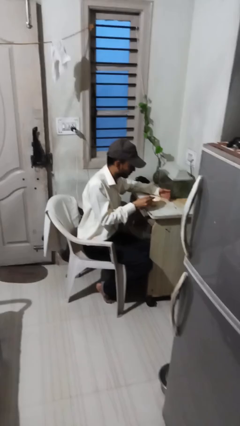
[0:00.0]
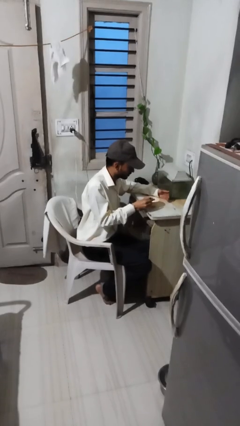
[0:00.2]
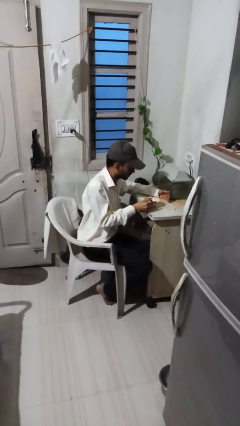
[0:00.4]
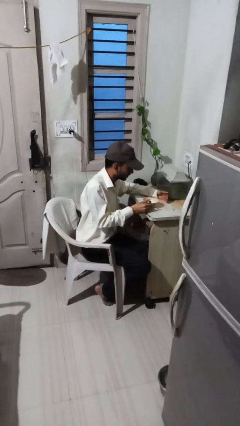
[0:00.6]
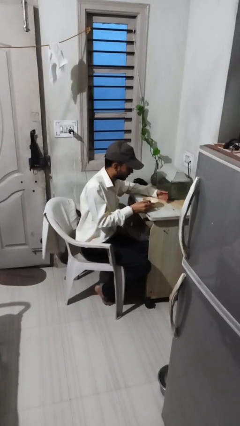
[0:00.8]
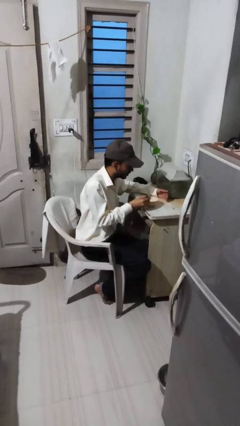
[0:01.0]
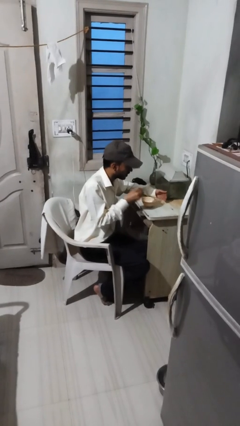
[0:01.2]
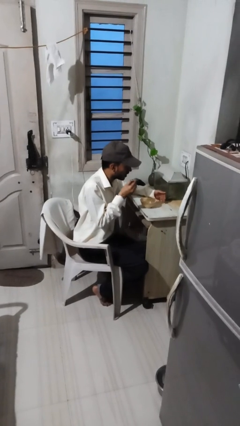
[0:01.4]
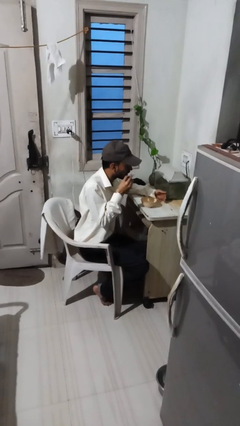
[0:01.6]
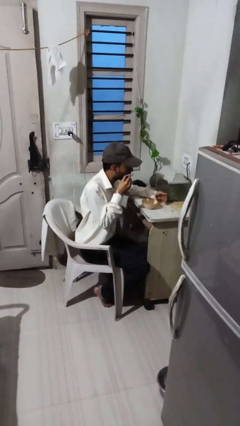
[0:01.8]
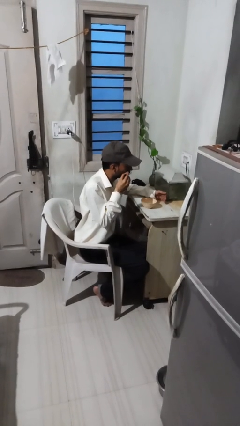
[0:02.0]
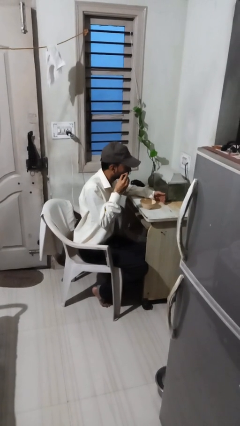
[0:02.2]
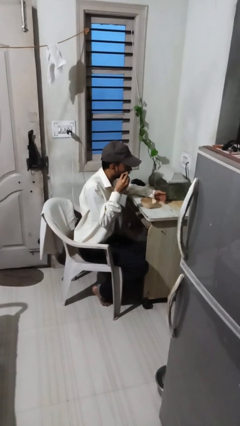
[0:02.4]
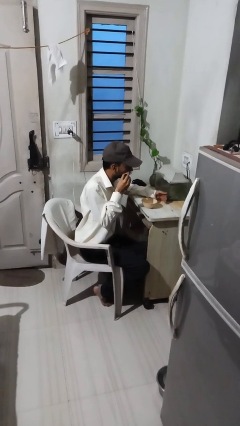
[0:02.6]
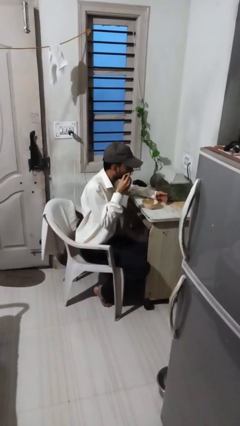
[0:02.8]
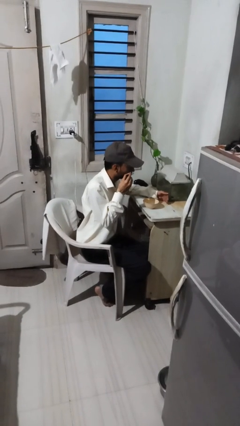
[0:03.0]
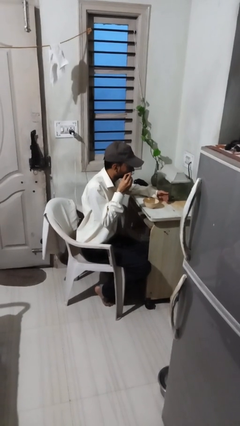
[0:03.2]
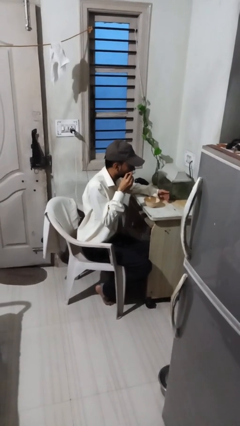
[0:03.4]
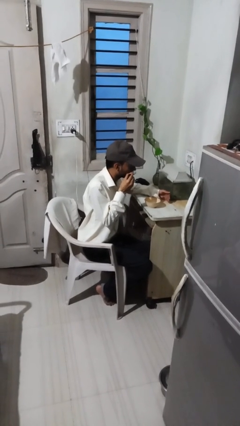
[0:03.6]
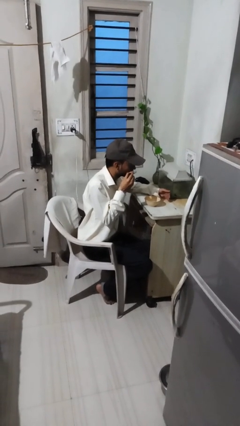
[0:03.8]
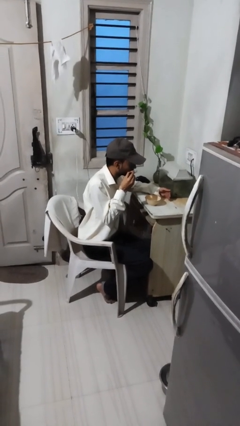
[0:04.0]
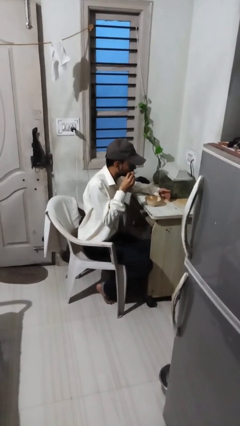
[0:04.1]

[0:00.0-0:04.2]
person eats with utensil

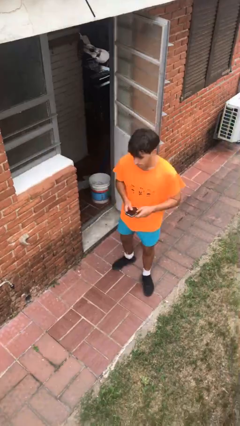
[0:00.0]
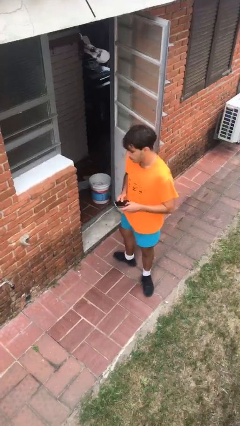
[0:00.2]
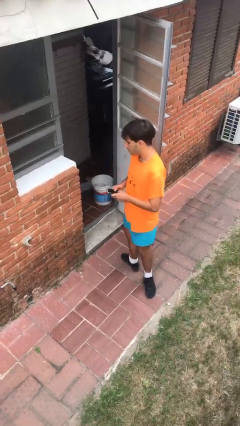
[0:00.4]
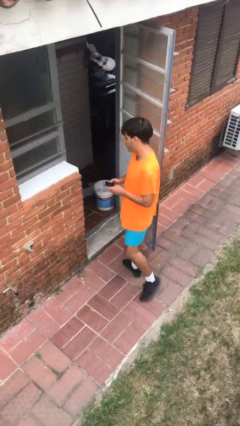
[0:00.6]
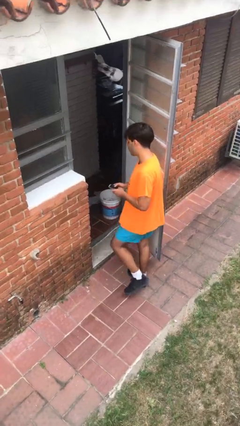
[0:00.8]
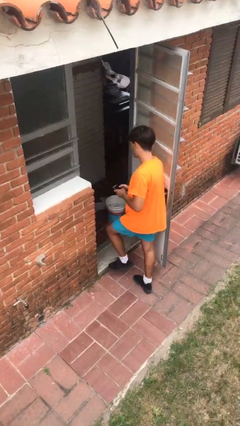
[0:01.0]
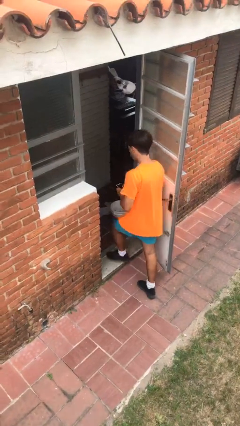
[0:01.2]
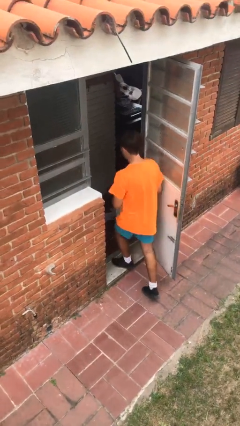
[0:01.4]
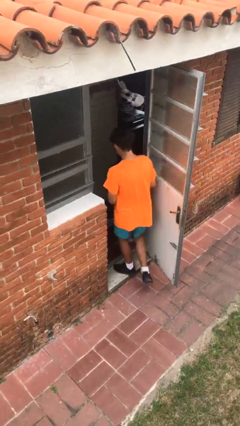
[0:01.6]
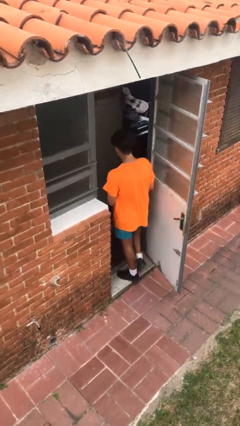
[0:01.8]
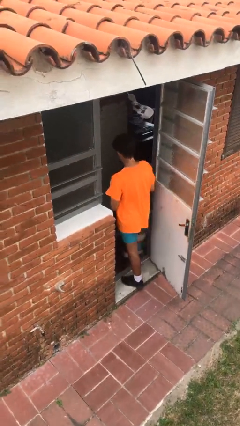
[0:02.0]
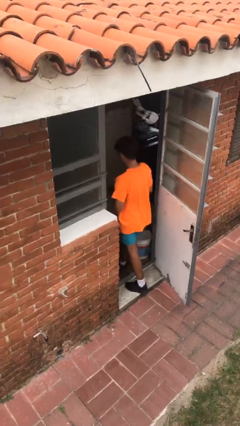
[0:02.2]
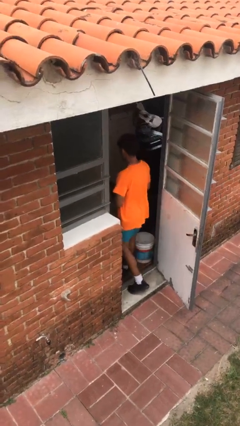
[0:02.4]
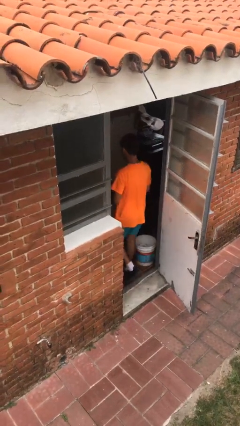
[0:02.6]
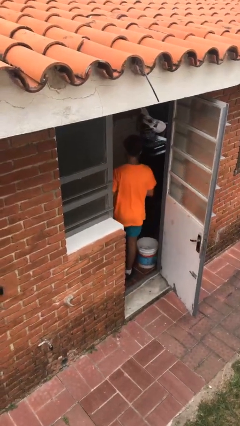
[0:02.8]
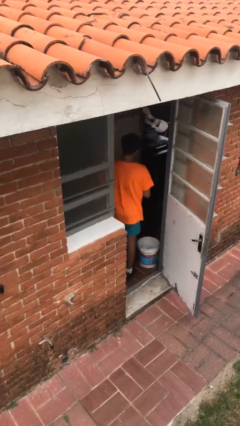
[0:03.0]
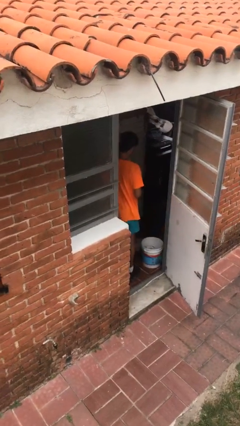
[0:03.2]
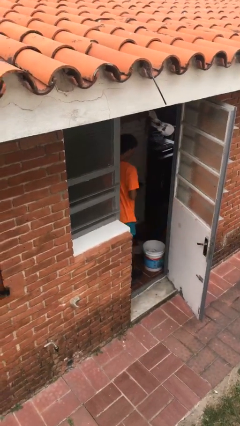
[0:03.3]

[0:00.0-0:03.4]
person exits scene through structure

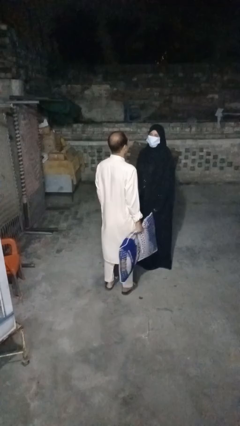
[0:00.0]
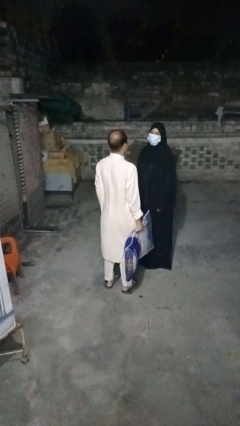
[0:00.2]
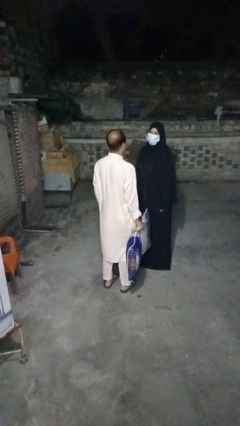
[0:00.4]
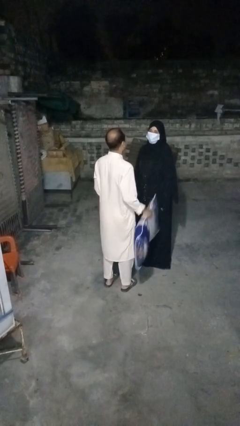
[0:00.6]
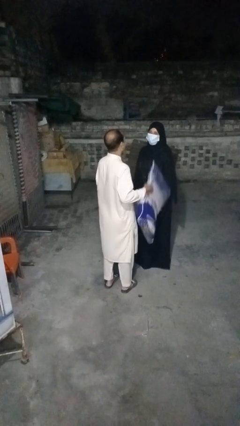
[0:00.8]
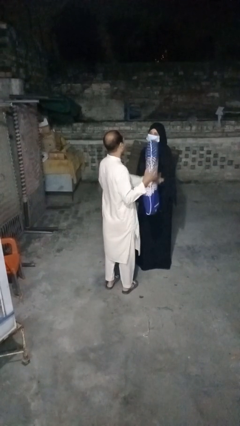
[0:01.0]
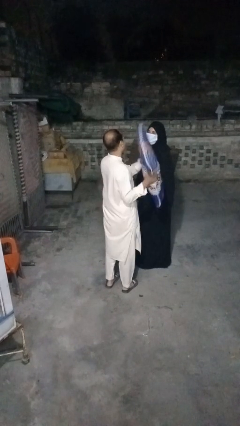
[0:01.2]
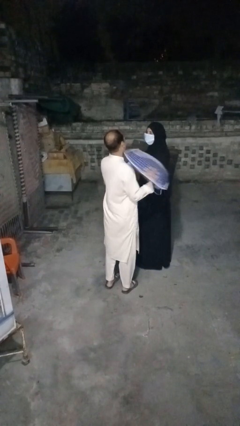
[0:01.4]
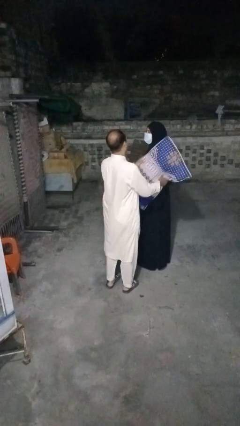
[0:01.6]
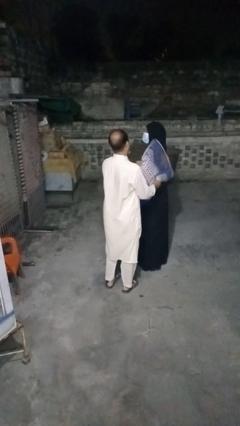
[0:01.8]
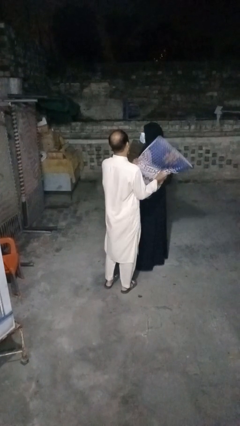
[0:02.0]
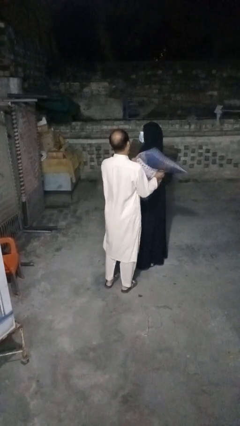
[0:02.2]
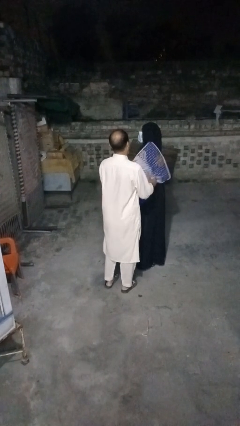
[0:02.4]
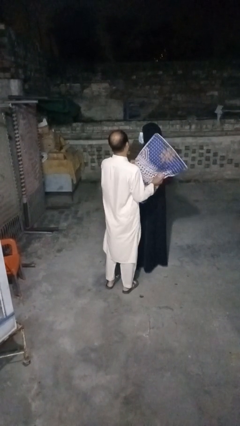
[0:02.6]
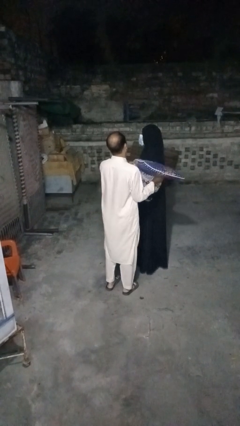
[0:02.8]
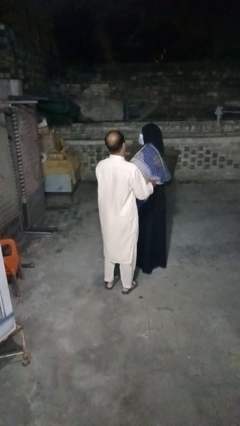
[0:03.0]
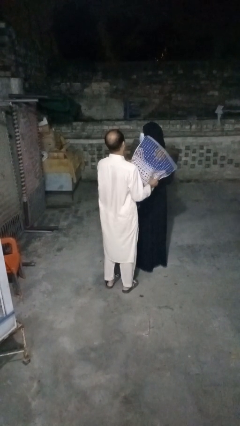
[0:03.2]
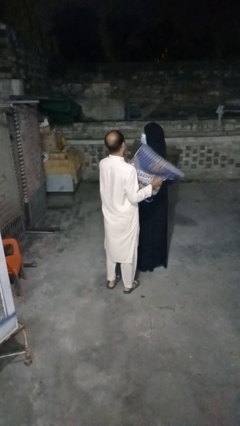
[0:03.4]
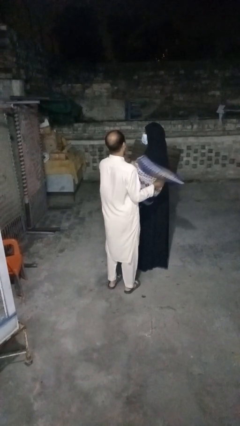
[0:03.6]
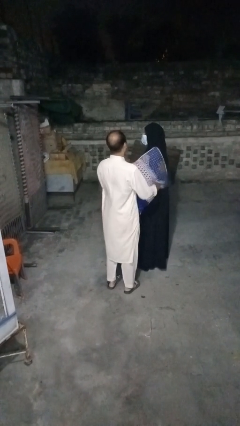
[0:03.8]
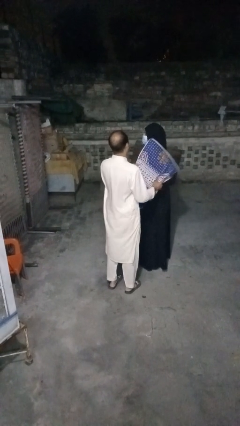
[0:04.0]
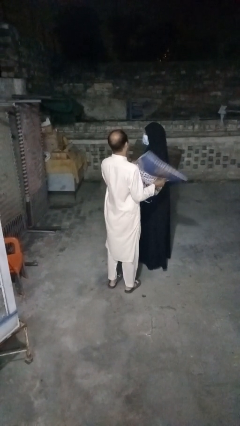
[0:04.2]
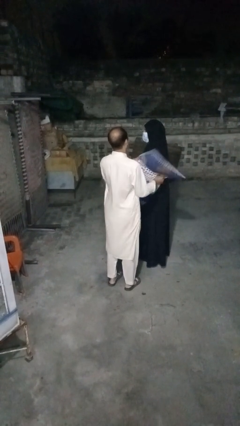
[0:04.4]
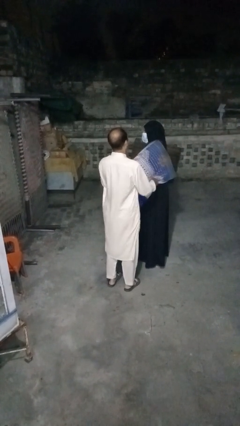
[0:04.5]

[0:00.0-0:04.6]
person hits person with pillow

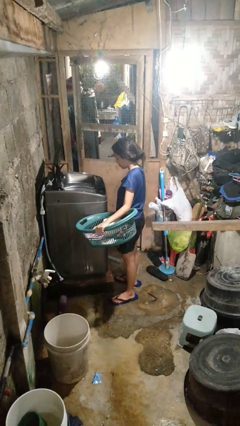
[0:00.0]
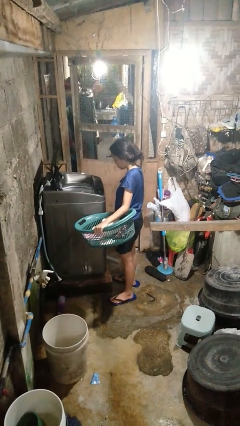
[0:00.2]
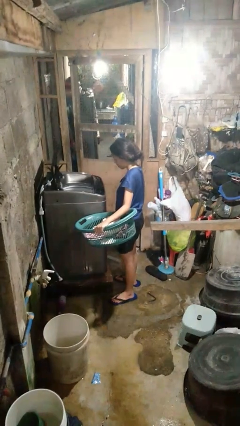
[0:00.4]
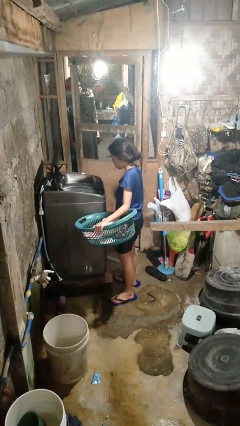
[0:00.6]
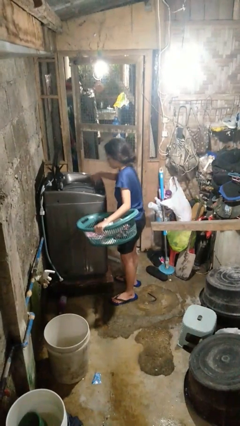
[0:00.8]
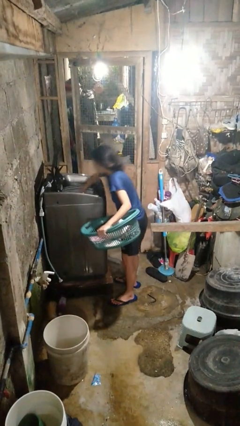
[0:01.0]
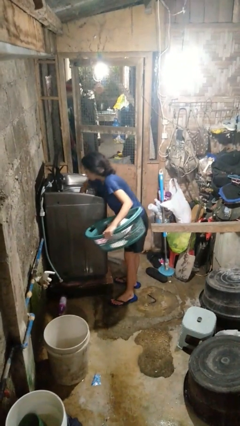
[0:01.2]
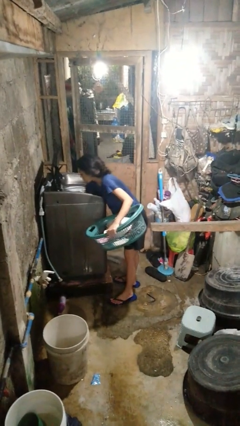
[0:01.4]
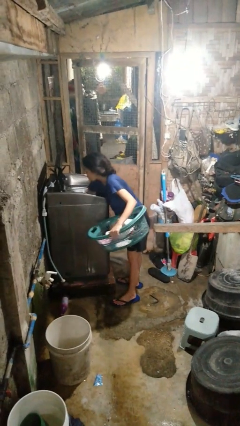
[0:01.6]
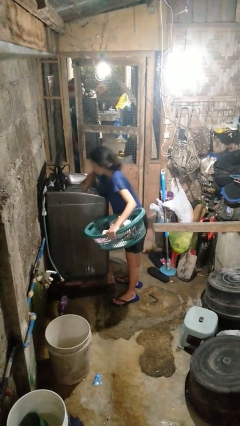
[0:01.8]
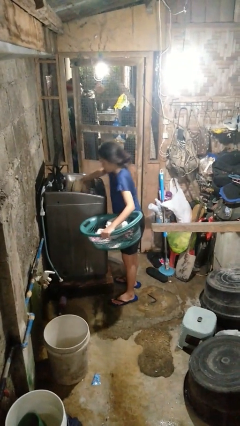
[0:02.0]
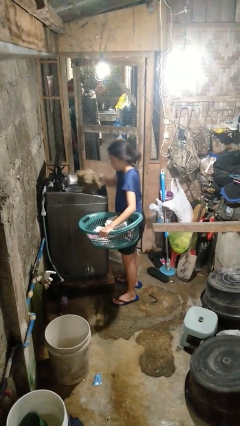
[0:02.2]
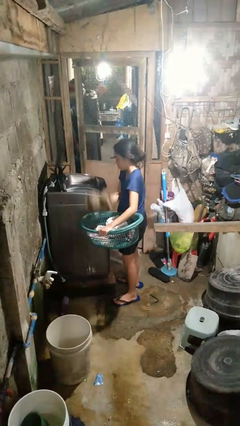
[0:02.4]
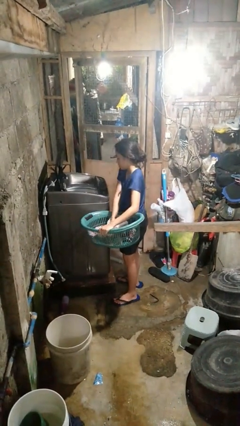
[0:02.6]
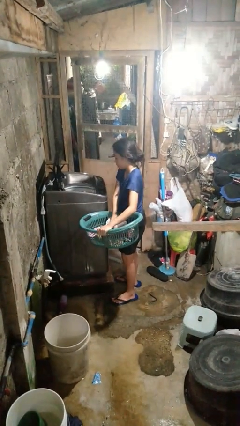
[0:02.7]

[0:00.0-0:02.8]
person unloads clotheswasher

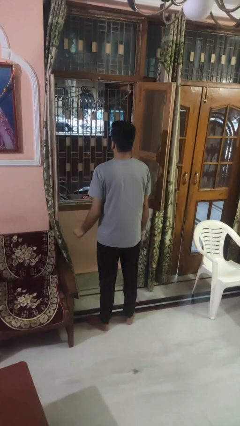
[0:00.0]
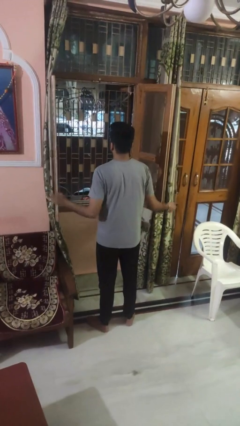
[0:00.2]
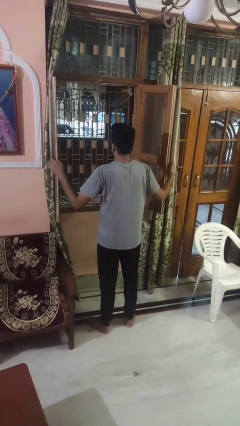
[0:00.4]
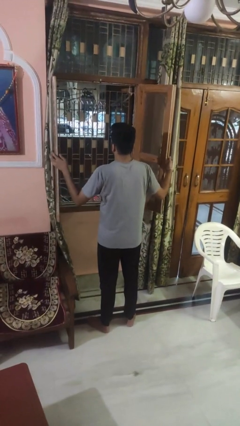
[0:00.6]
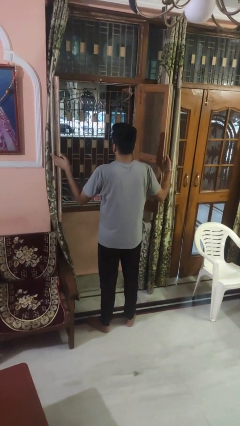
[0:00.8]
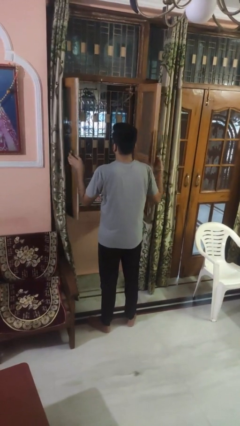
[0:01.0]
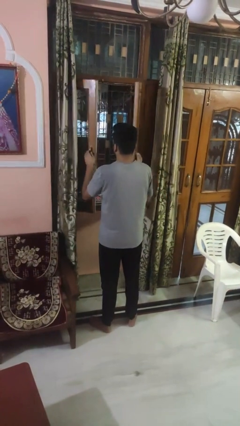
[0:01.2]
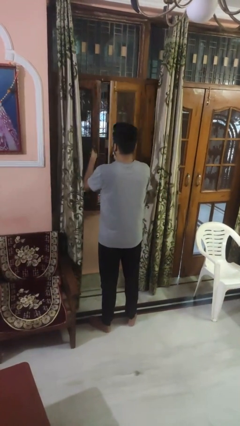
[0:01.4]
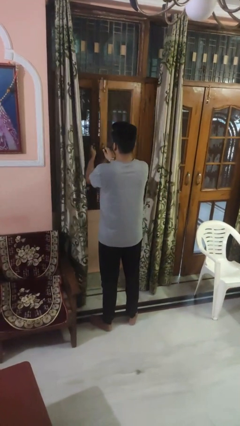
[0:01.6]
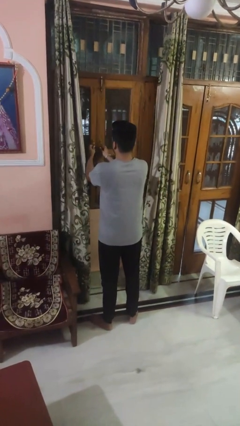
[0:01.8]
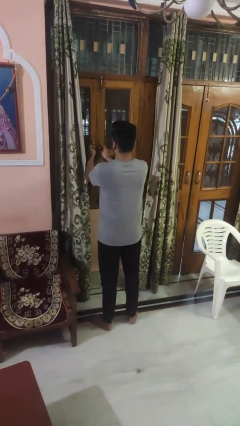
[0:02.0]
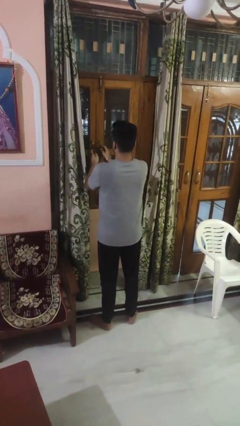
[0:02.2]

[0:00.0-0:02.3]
person closes home window

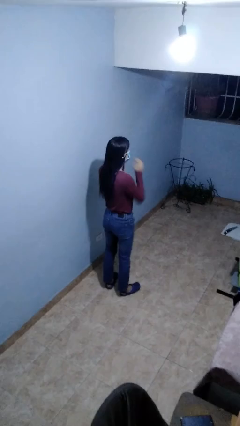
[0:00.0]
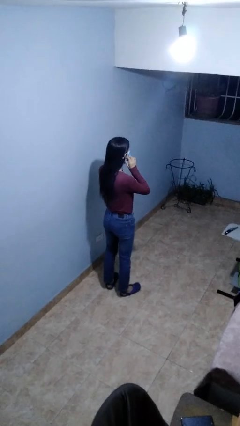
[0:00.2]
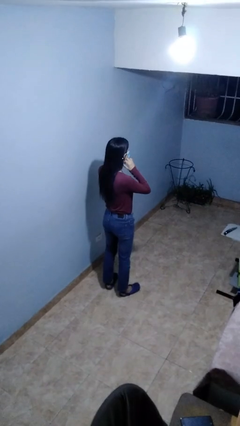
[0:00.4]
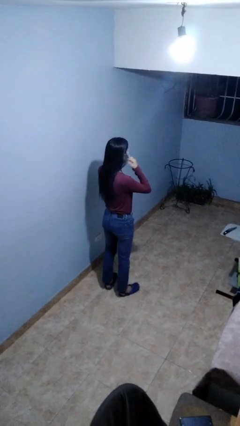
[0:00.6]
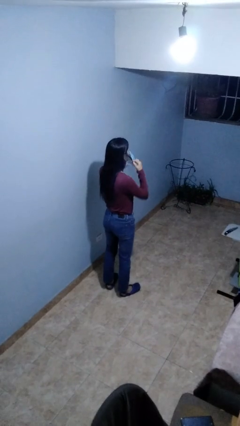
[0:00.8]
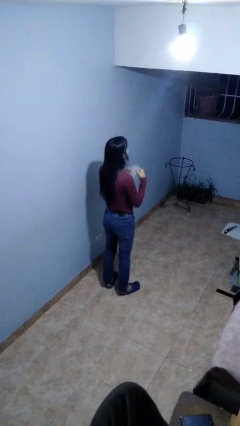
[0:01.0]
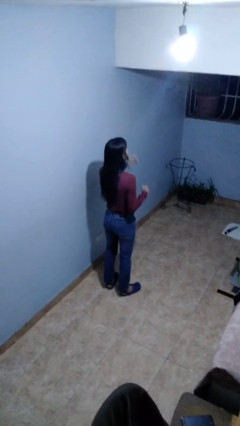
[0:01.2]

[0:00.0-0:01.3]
person takes off facemask
